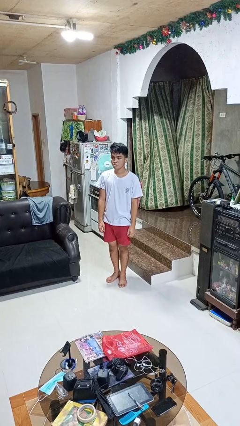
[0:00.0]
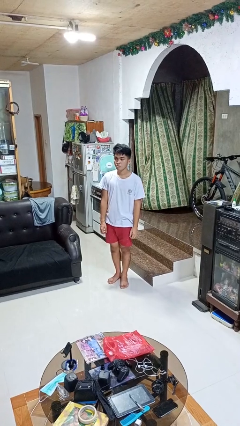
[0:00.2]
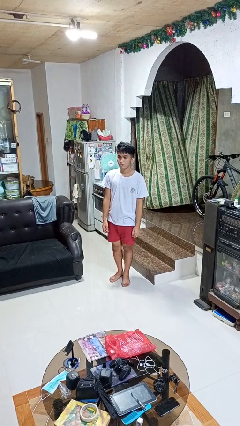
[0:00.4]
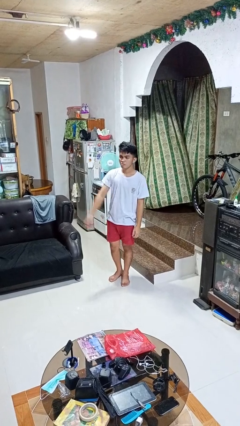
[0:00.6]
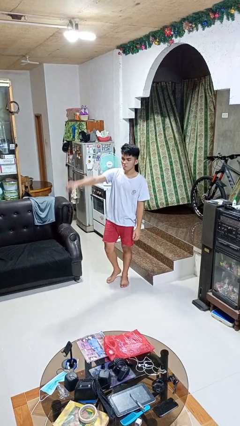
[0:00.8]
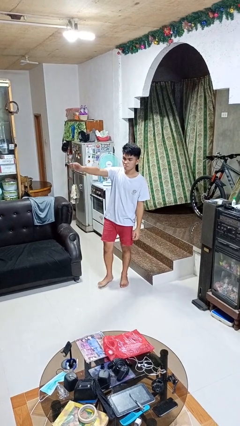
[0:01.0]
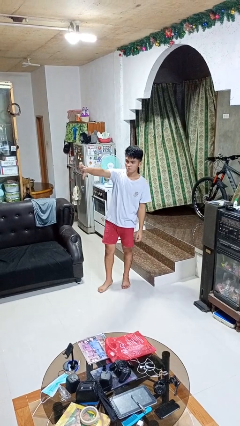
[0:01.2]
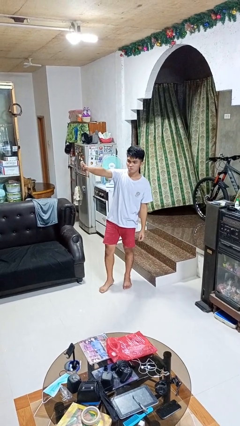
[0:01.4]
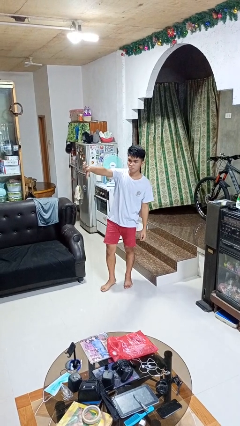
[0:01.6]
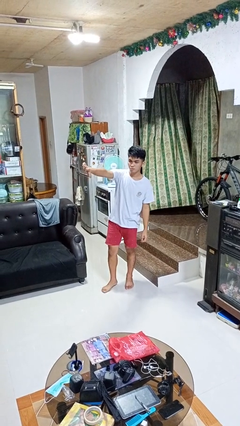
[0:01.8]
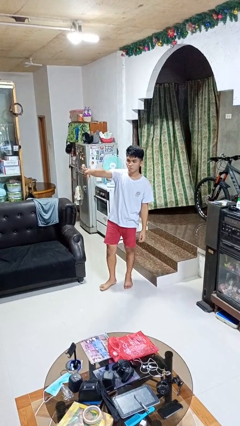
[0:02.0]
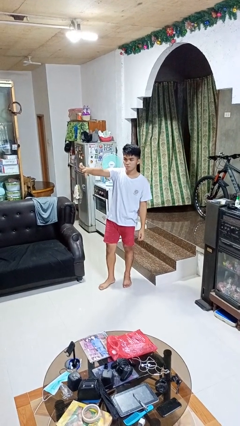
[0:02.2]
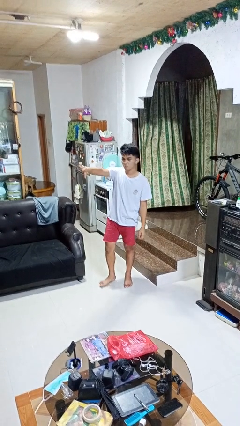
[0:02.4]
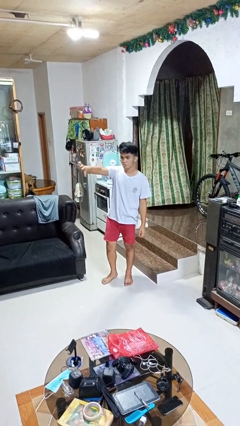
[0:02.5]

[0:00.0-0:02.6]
person gestures thumbs down

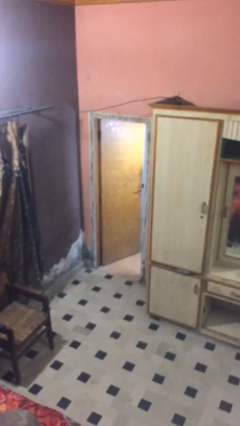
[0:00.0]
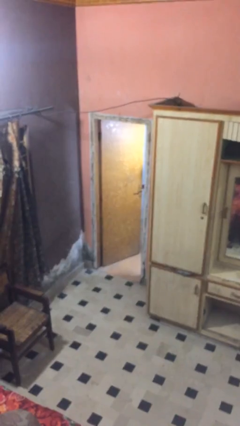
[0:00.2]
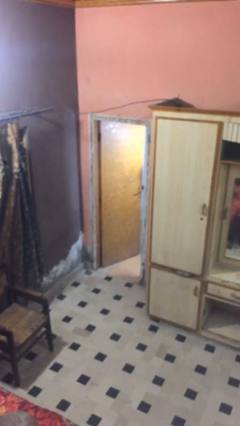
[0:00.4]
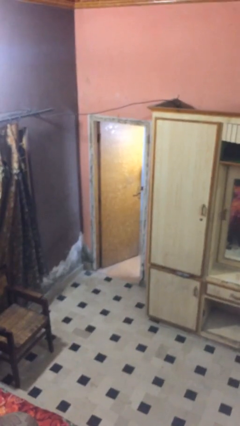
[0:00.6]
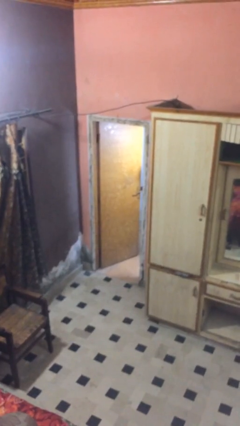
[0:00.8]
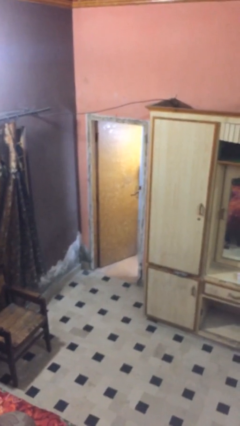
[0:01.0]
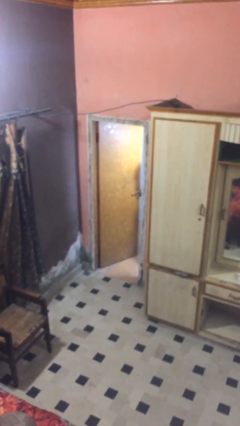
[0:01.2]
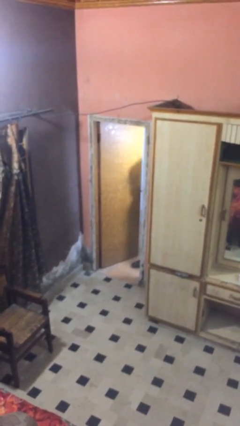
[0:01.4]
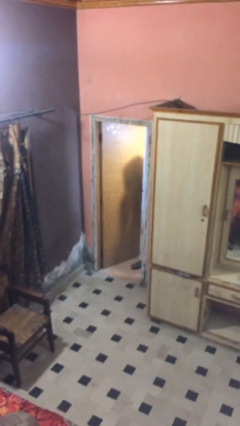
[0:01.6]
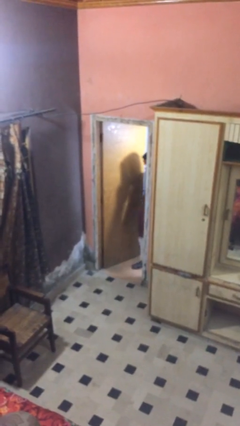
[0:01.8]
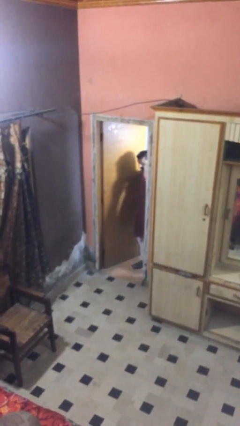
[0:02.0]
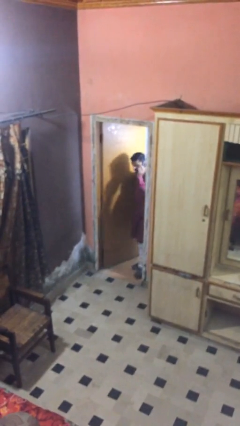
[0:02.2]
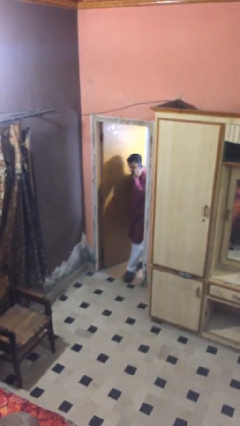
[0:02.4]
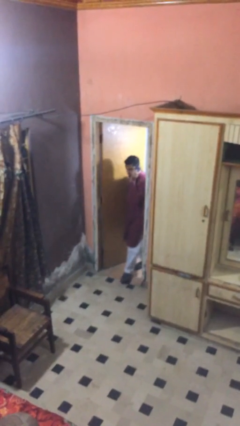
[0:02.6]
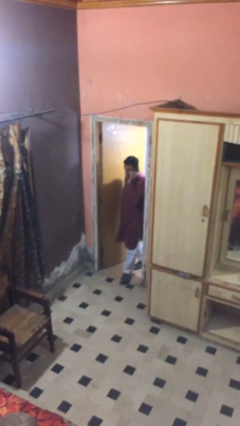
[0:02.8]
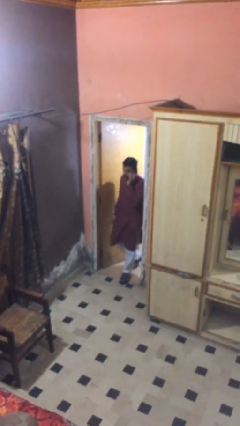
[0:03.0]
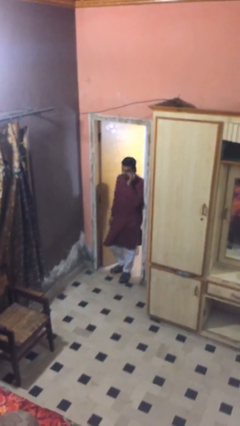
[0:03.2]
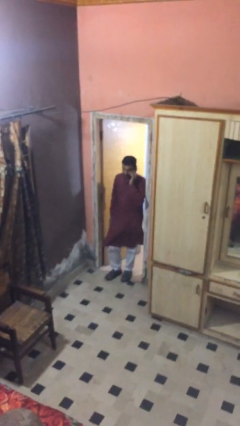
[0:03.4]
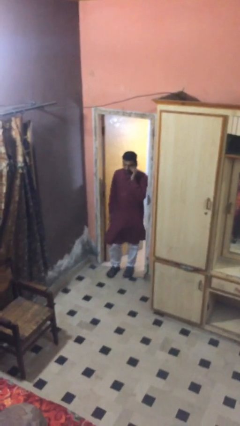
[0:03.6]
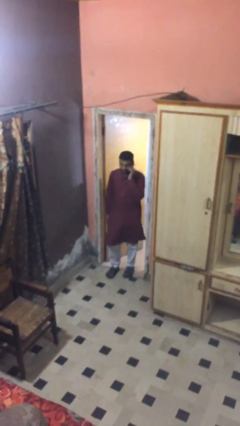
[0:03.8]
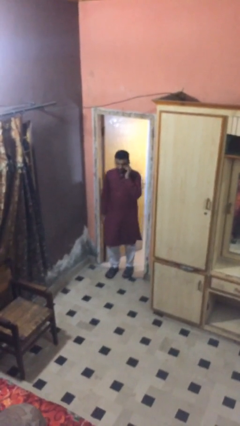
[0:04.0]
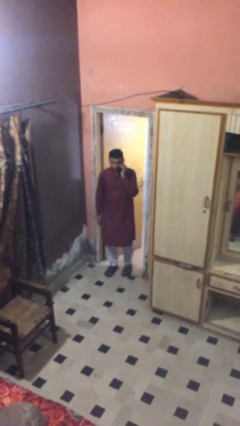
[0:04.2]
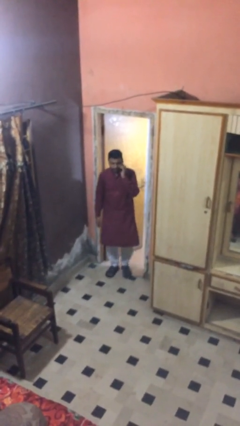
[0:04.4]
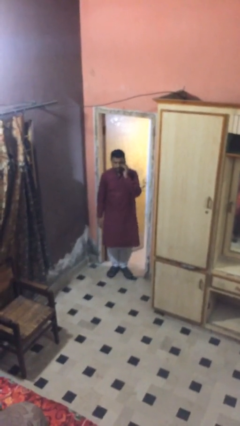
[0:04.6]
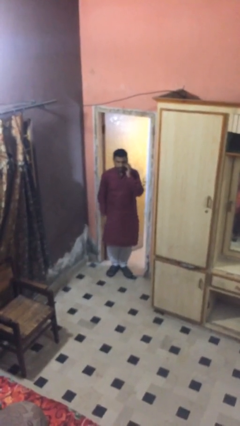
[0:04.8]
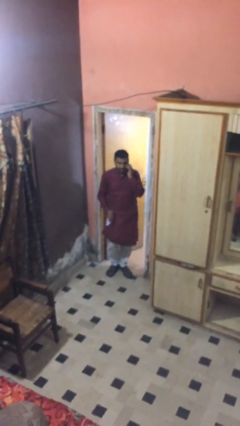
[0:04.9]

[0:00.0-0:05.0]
person enters scene through structure

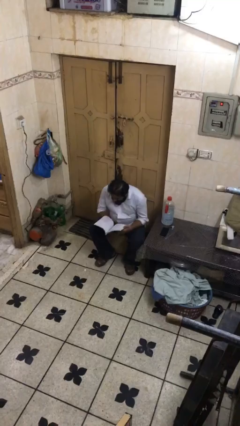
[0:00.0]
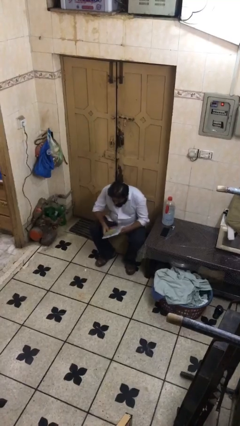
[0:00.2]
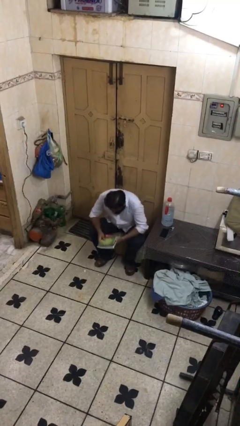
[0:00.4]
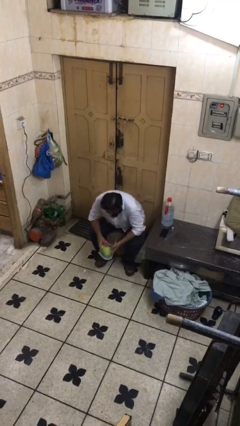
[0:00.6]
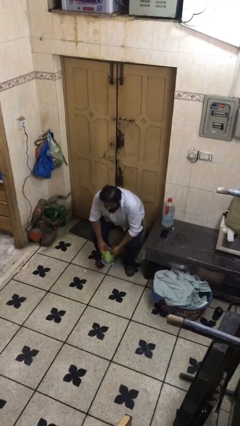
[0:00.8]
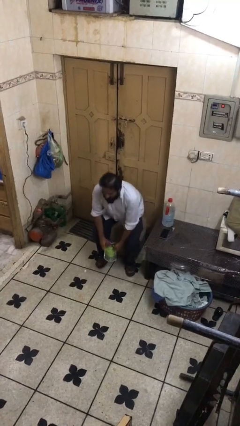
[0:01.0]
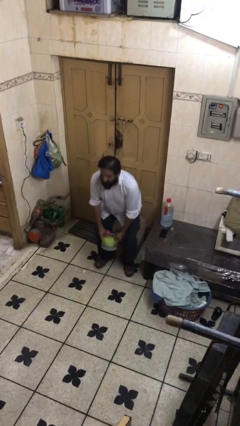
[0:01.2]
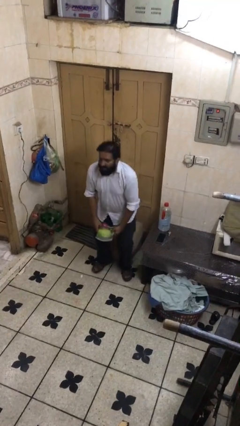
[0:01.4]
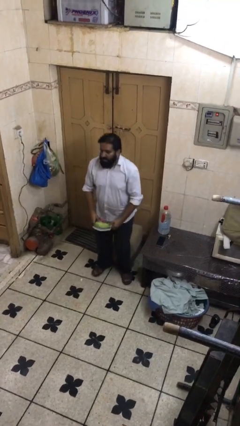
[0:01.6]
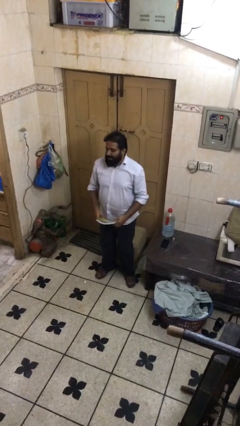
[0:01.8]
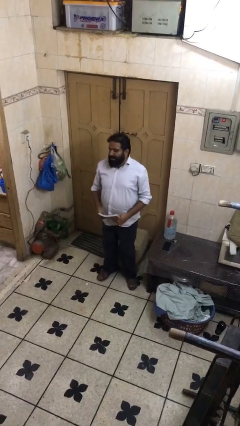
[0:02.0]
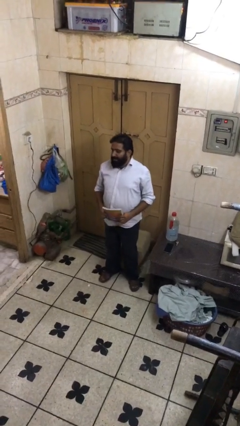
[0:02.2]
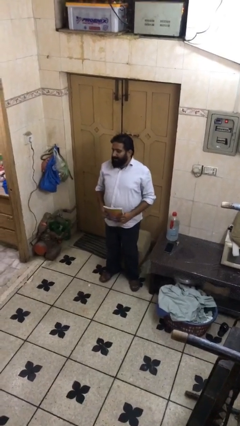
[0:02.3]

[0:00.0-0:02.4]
person stands up

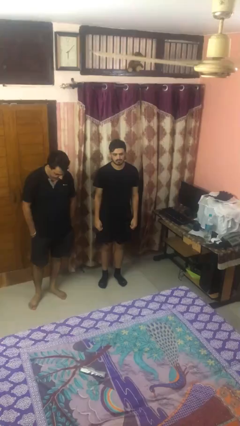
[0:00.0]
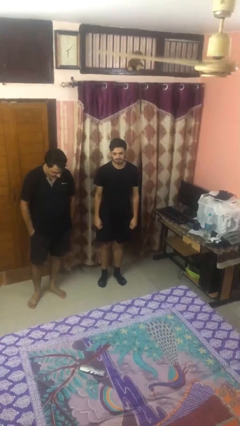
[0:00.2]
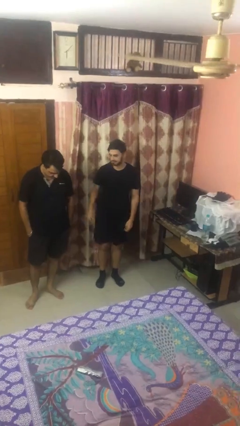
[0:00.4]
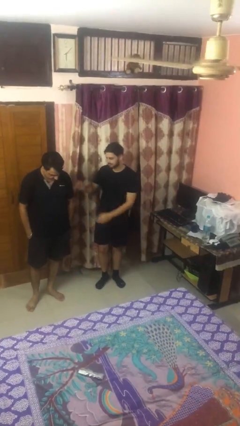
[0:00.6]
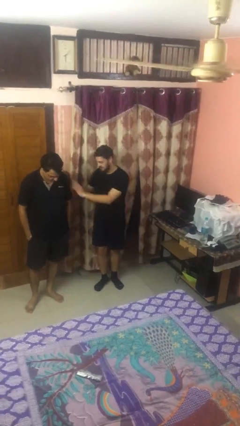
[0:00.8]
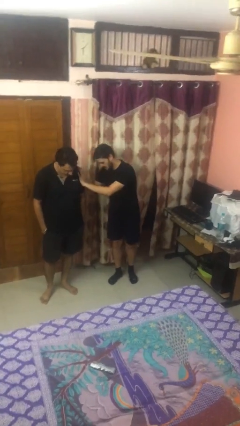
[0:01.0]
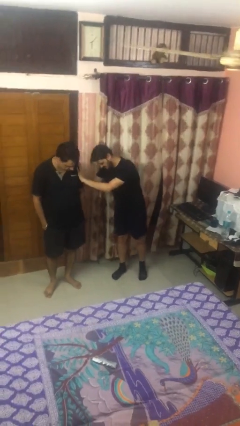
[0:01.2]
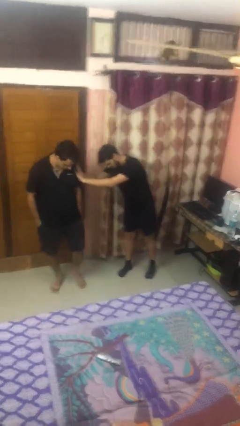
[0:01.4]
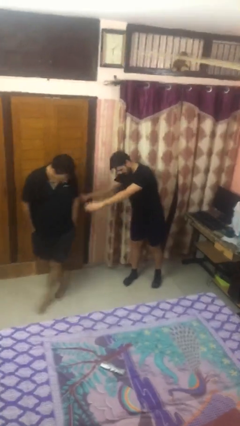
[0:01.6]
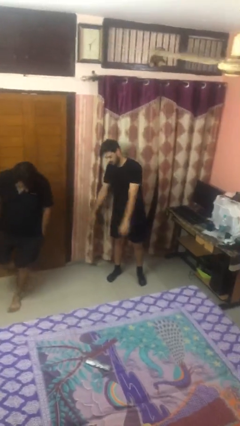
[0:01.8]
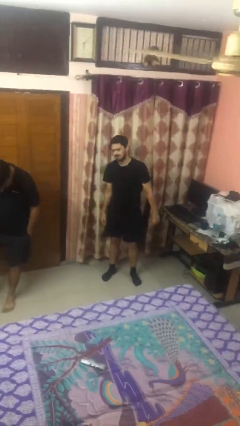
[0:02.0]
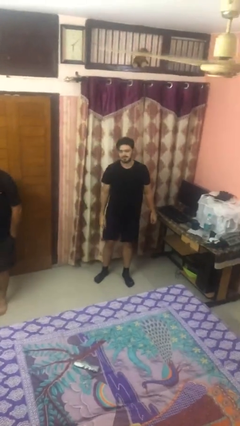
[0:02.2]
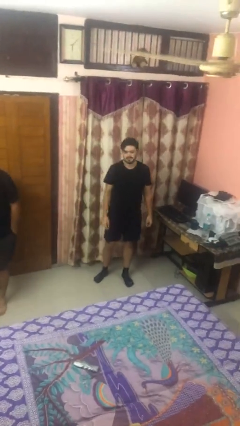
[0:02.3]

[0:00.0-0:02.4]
person shoves person

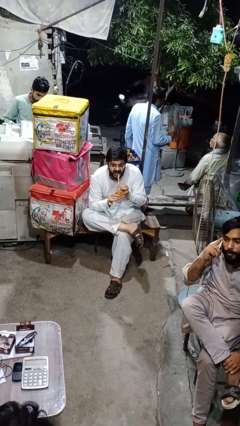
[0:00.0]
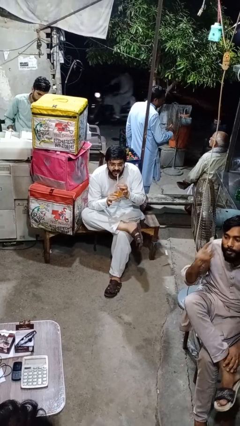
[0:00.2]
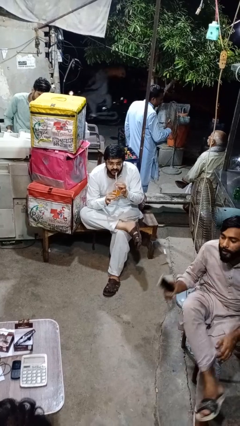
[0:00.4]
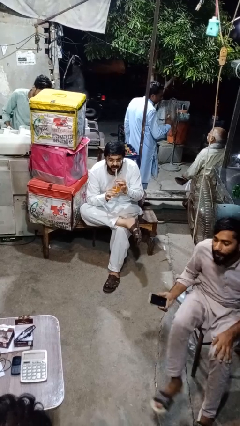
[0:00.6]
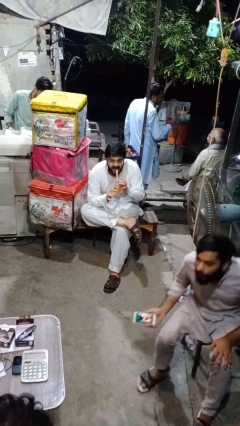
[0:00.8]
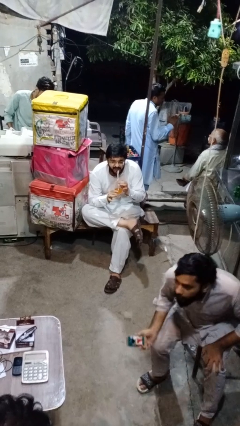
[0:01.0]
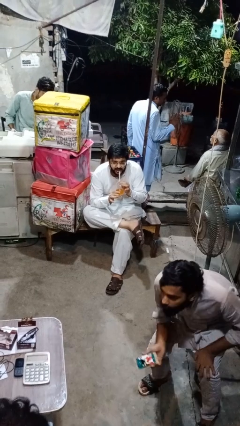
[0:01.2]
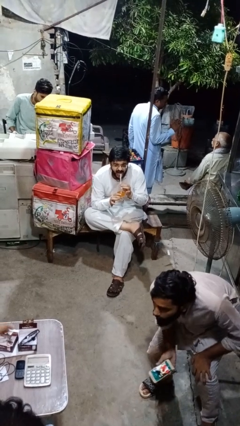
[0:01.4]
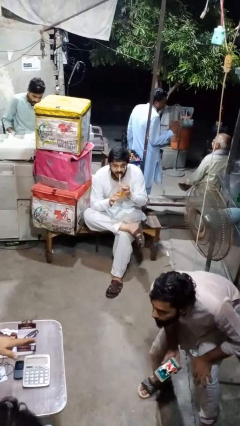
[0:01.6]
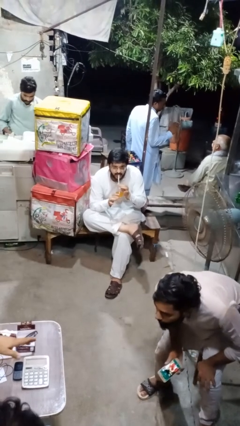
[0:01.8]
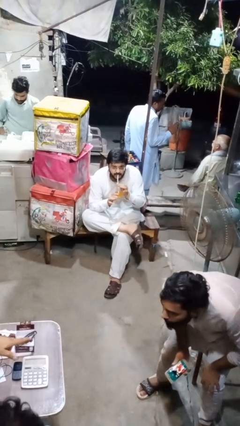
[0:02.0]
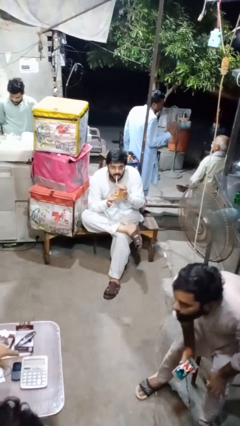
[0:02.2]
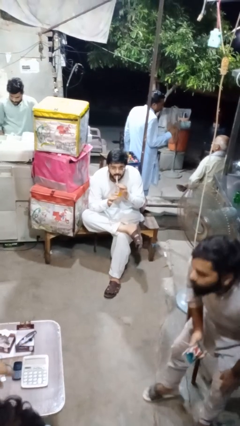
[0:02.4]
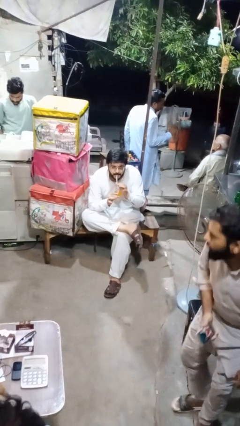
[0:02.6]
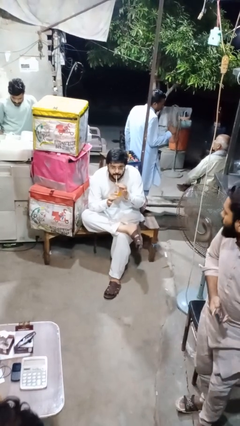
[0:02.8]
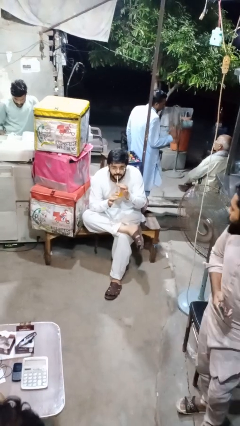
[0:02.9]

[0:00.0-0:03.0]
person drinks from straw

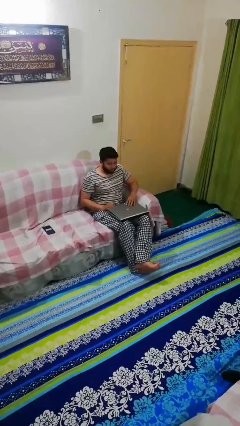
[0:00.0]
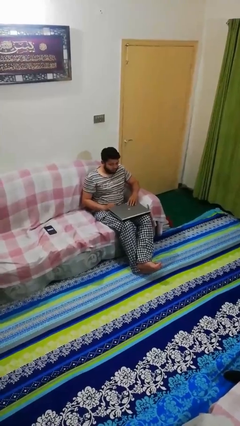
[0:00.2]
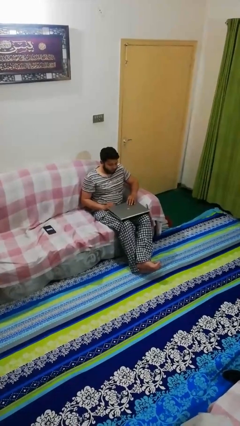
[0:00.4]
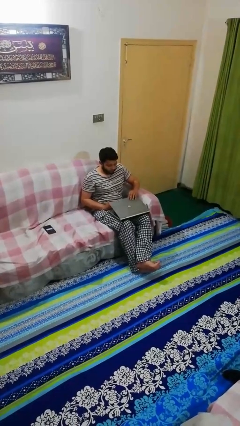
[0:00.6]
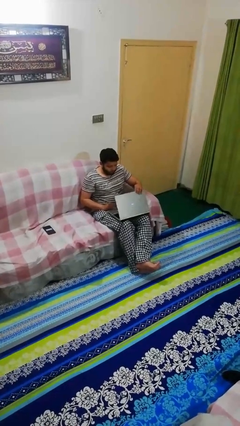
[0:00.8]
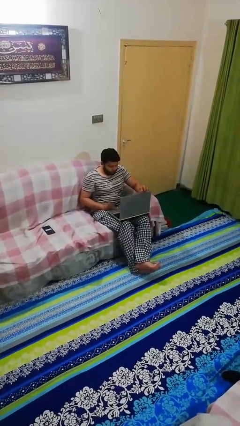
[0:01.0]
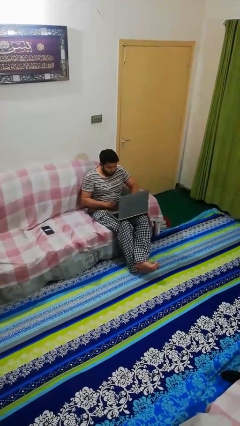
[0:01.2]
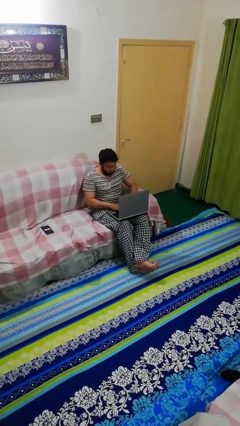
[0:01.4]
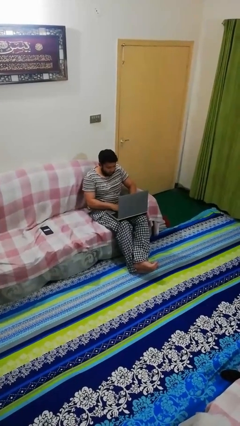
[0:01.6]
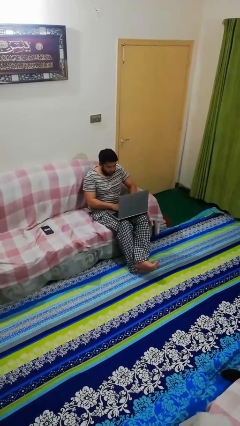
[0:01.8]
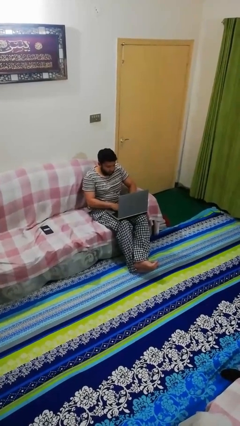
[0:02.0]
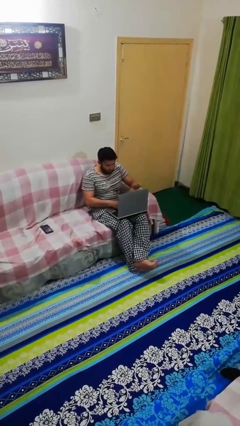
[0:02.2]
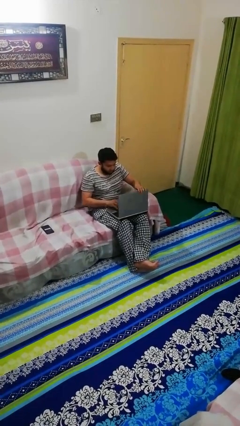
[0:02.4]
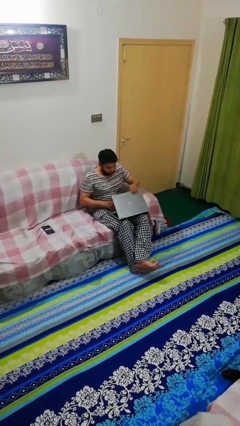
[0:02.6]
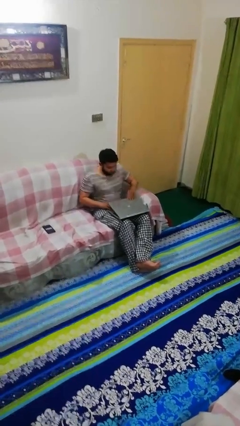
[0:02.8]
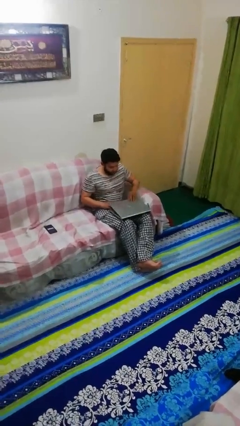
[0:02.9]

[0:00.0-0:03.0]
person interacts with laptop
